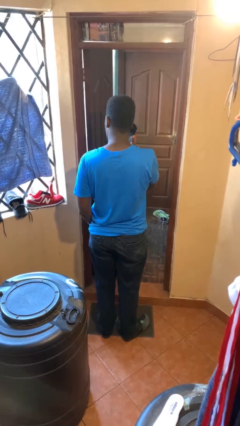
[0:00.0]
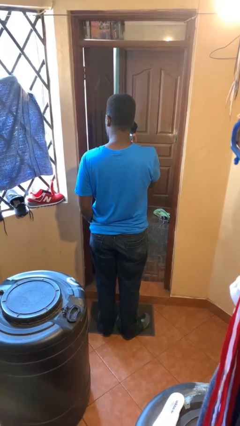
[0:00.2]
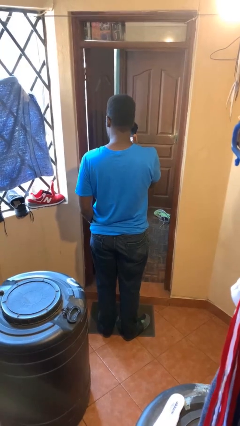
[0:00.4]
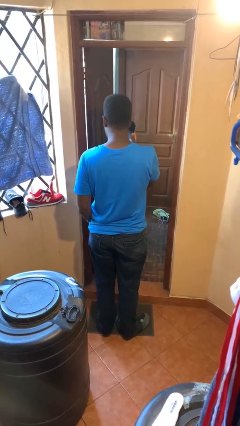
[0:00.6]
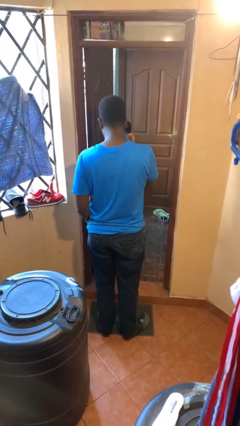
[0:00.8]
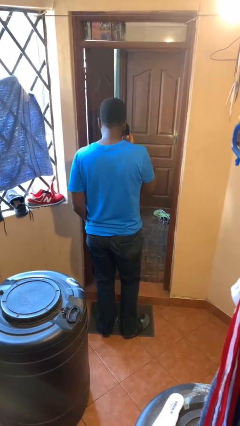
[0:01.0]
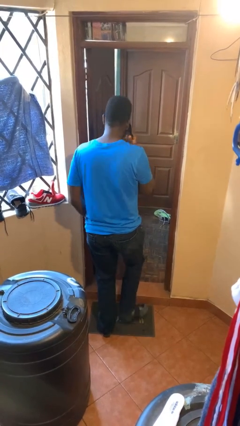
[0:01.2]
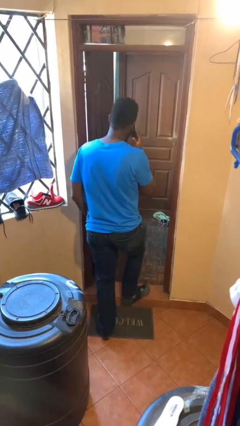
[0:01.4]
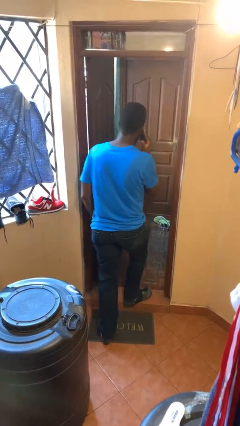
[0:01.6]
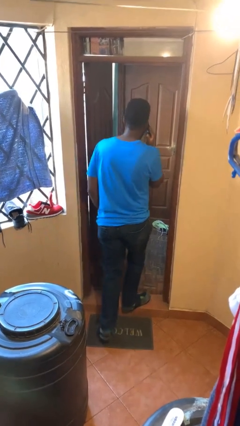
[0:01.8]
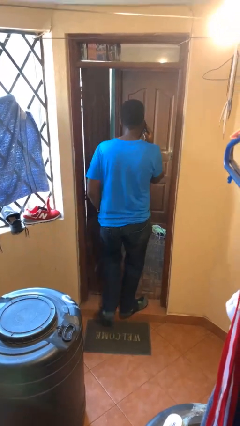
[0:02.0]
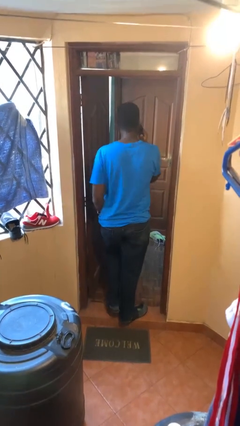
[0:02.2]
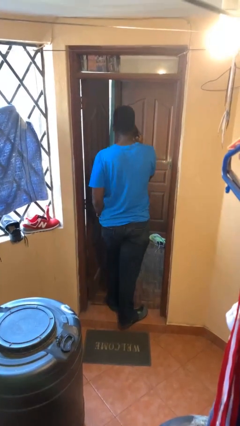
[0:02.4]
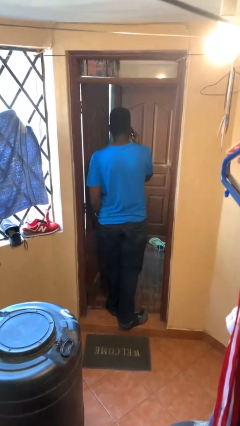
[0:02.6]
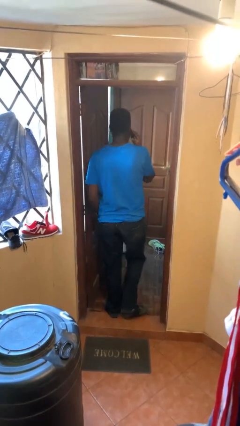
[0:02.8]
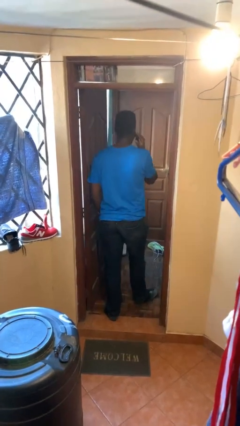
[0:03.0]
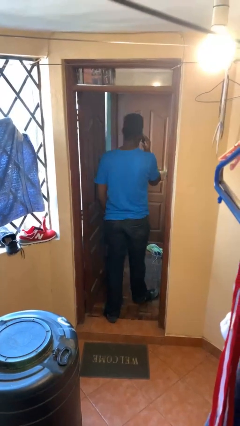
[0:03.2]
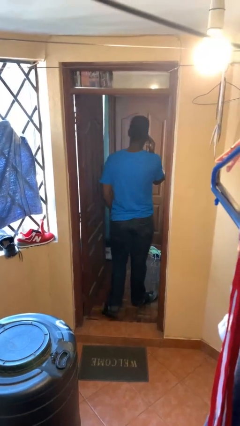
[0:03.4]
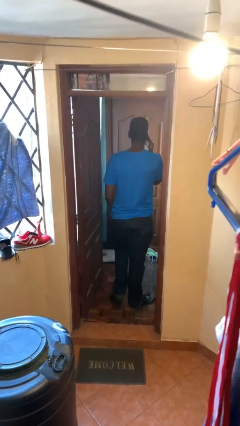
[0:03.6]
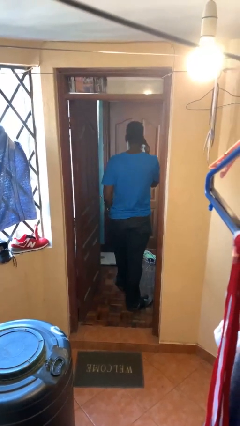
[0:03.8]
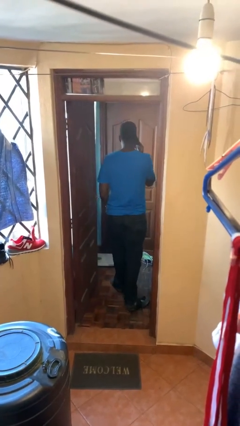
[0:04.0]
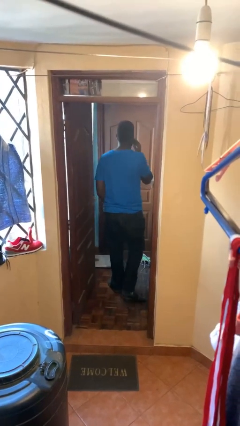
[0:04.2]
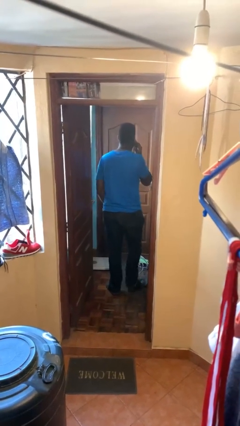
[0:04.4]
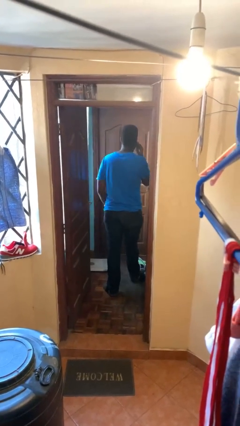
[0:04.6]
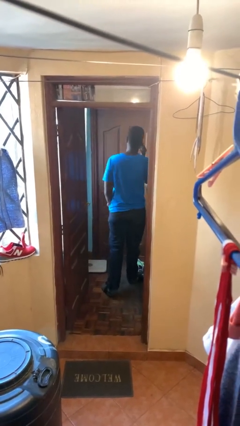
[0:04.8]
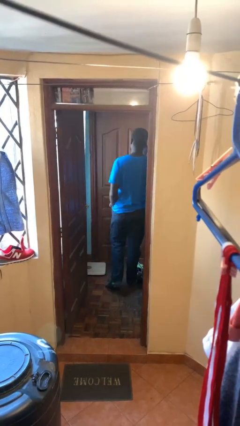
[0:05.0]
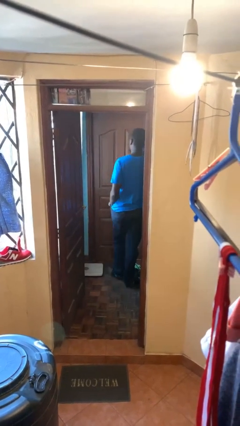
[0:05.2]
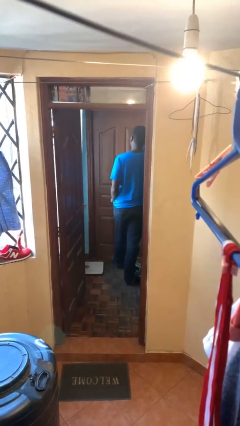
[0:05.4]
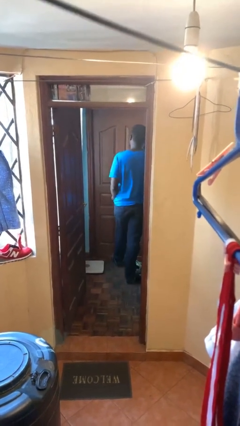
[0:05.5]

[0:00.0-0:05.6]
person exits scene through structure

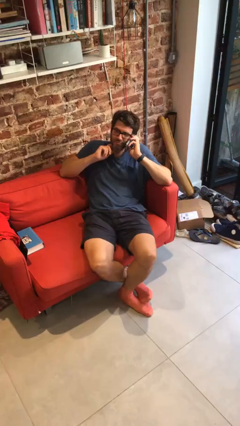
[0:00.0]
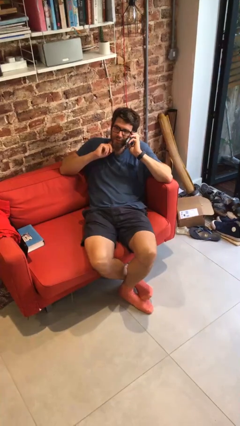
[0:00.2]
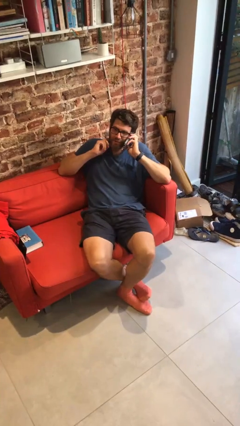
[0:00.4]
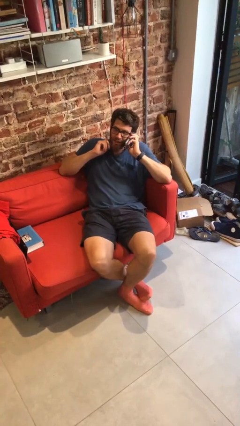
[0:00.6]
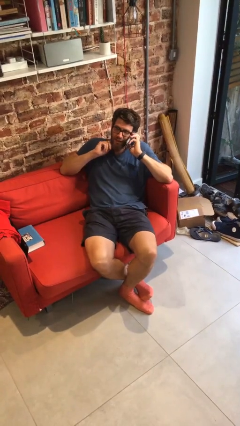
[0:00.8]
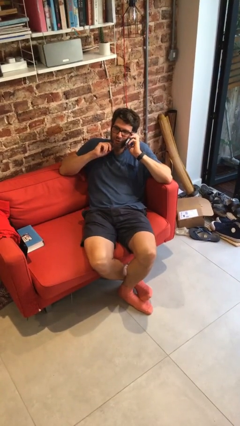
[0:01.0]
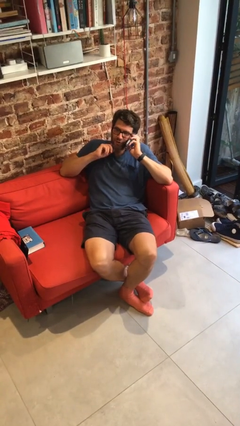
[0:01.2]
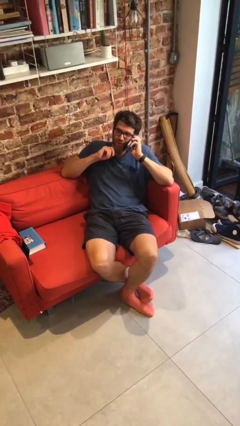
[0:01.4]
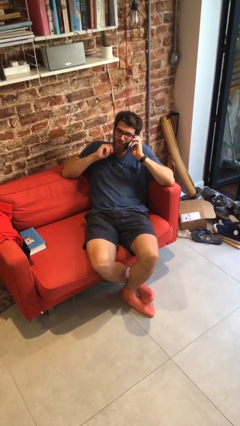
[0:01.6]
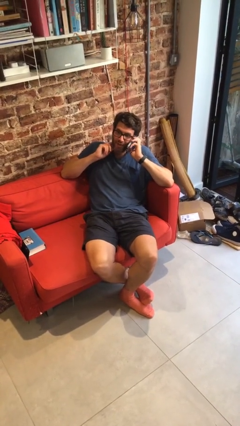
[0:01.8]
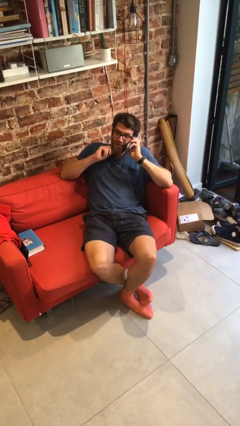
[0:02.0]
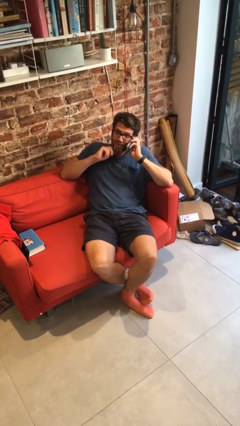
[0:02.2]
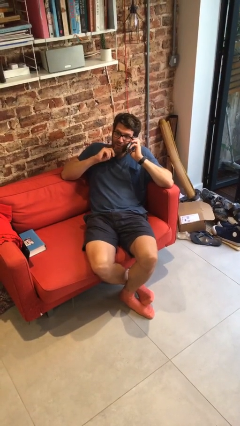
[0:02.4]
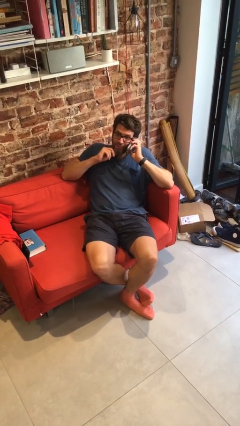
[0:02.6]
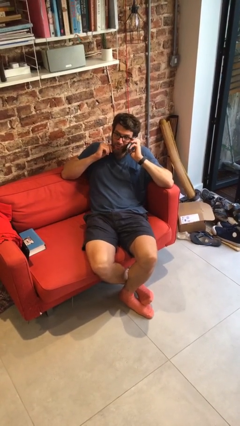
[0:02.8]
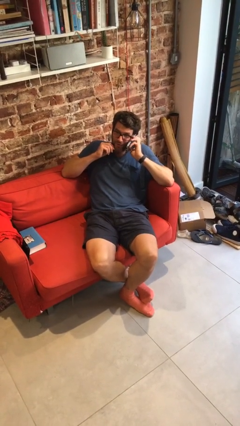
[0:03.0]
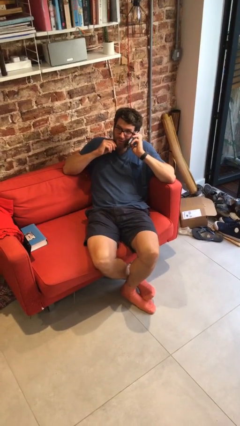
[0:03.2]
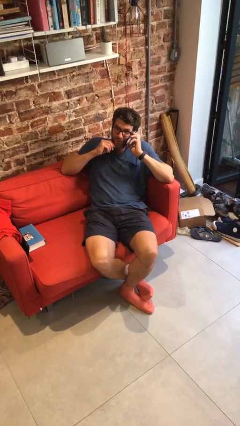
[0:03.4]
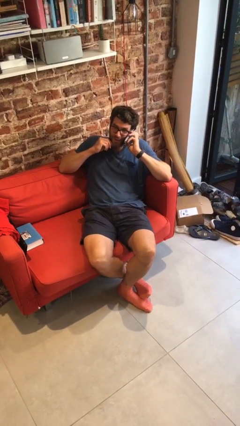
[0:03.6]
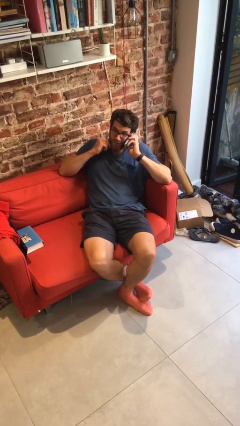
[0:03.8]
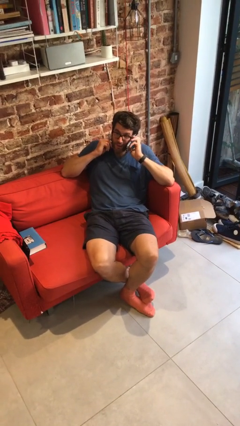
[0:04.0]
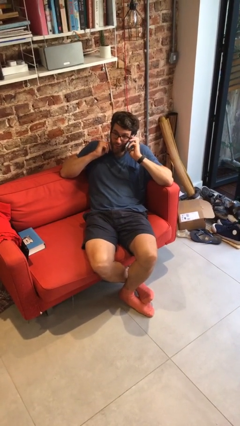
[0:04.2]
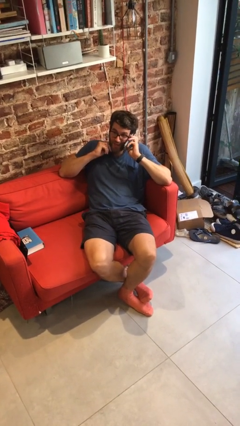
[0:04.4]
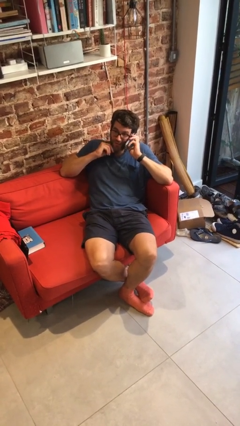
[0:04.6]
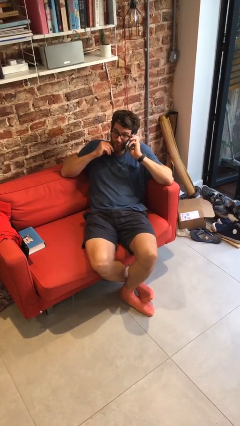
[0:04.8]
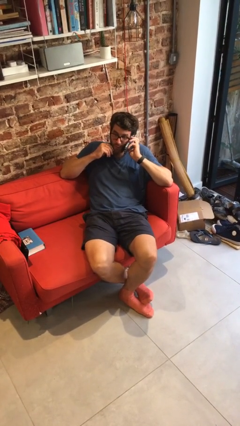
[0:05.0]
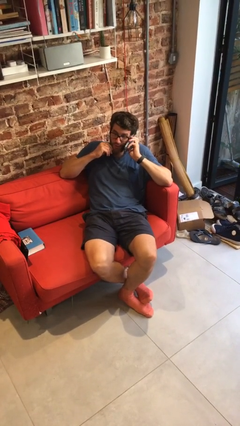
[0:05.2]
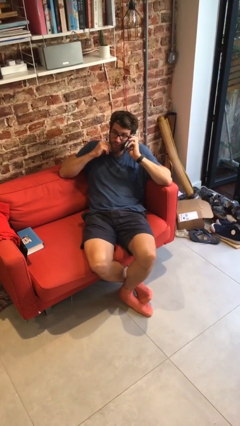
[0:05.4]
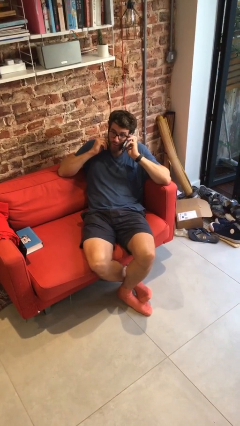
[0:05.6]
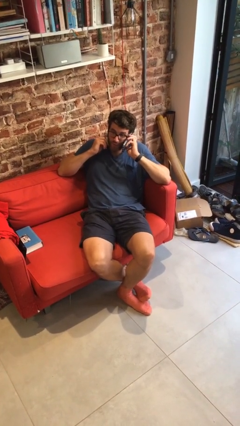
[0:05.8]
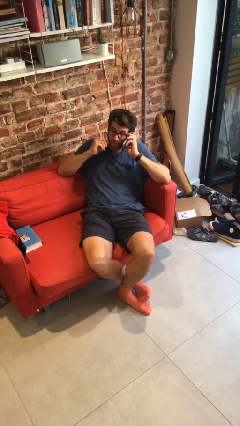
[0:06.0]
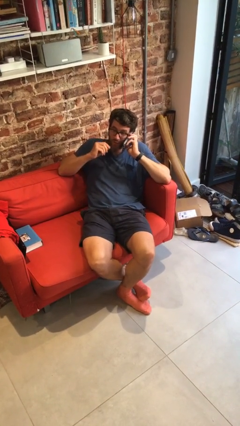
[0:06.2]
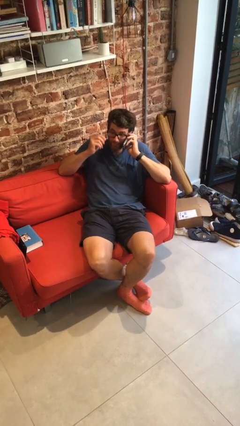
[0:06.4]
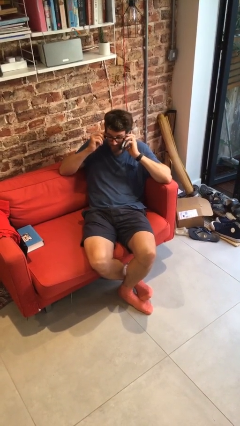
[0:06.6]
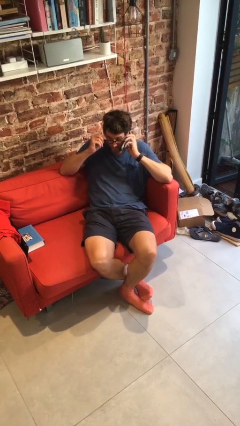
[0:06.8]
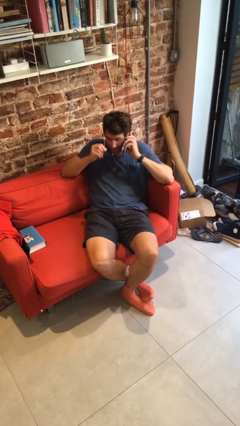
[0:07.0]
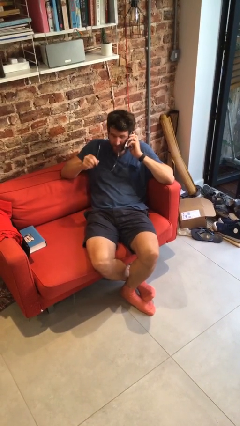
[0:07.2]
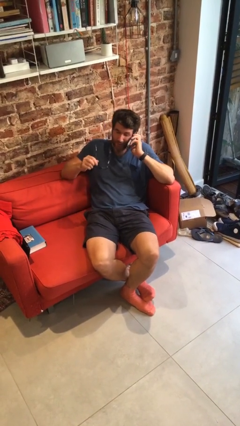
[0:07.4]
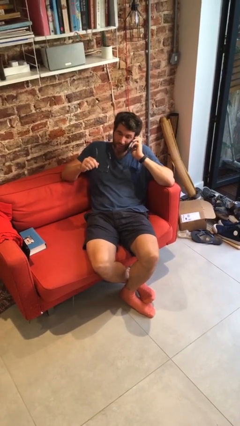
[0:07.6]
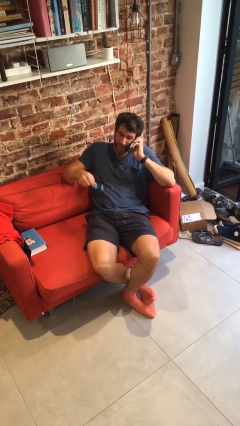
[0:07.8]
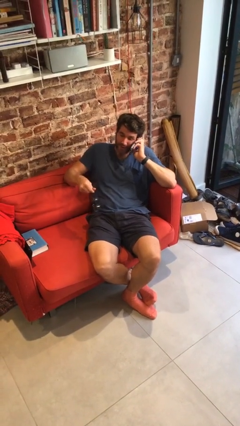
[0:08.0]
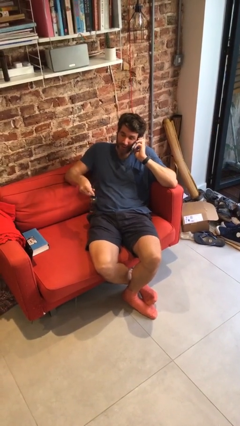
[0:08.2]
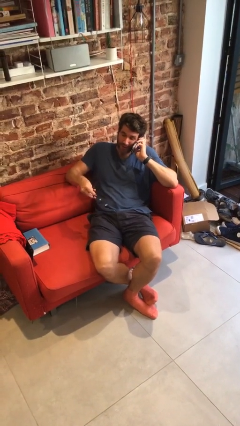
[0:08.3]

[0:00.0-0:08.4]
person talks on phone

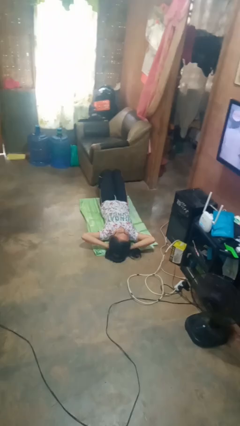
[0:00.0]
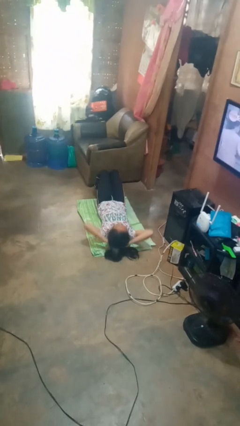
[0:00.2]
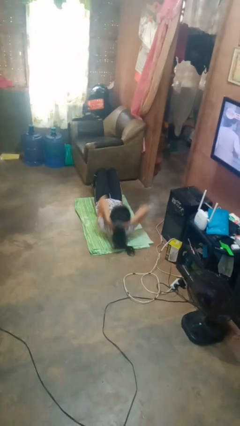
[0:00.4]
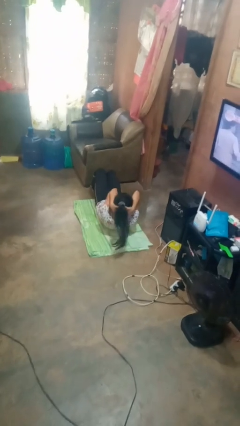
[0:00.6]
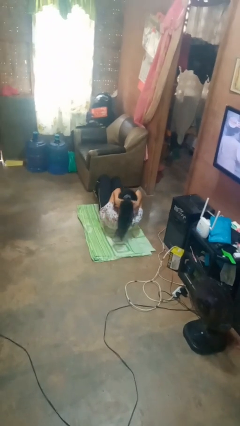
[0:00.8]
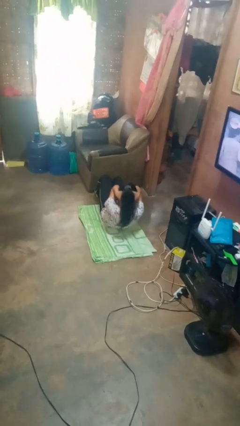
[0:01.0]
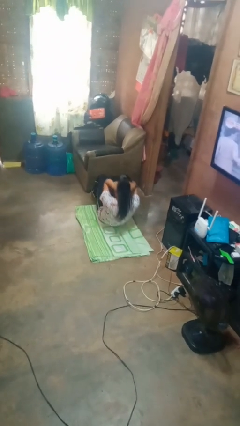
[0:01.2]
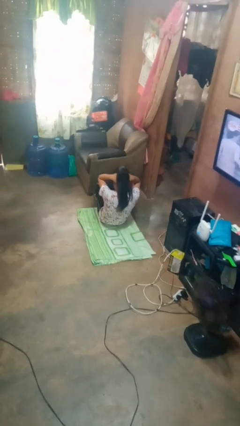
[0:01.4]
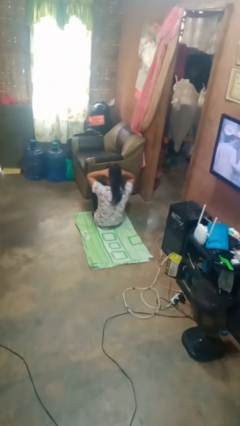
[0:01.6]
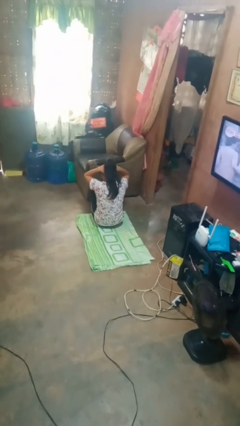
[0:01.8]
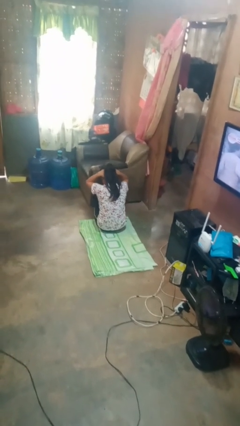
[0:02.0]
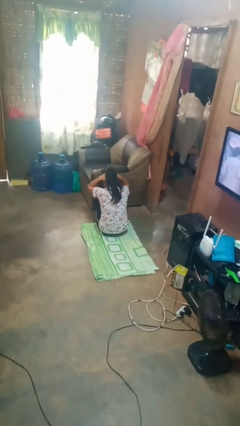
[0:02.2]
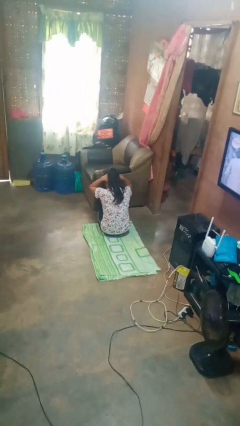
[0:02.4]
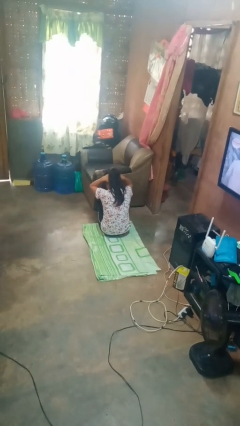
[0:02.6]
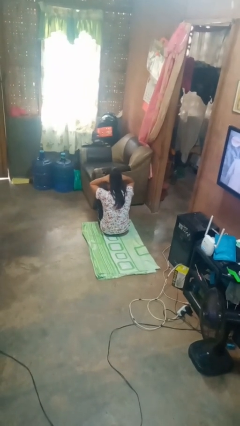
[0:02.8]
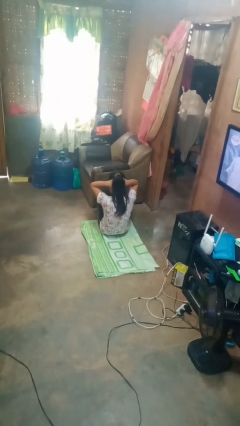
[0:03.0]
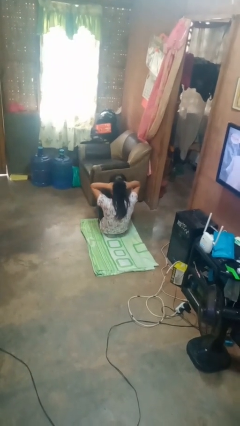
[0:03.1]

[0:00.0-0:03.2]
person exercises with situp

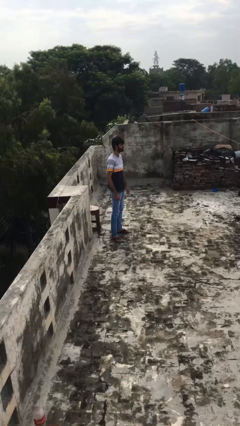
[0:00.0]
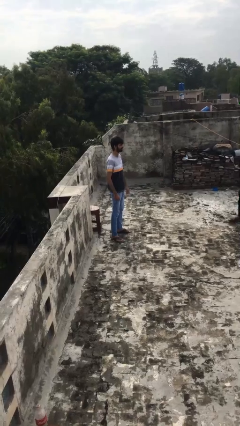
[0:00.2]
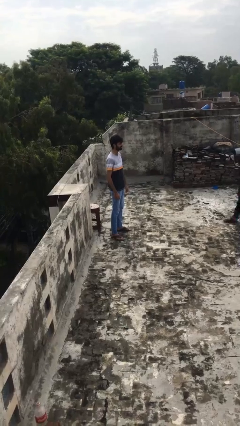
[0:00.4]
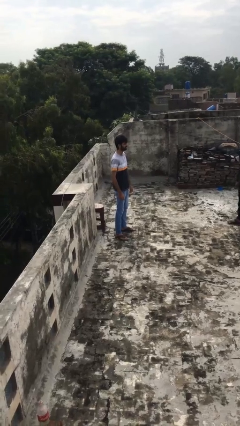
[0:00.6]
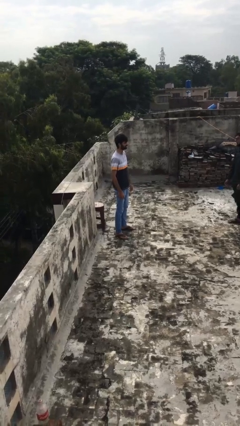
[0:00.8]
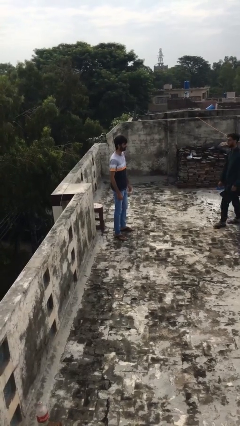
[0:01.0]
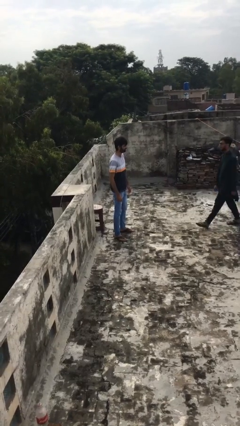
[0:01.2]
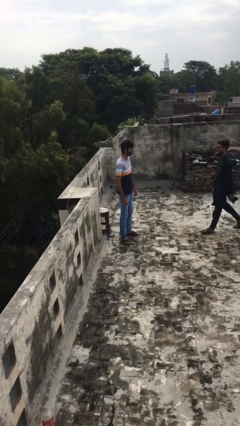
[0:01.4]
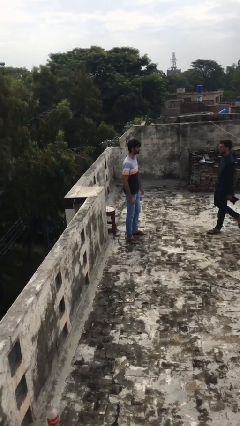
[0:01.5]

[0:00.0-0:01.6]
person embraces person
